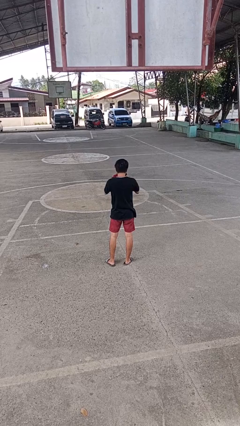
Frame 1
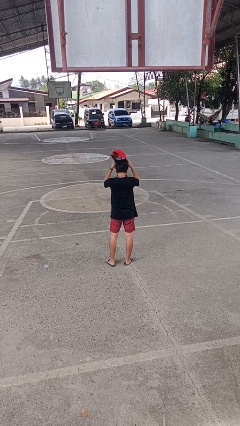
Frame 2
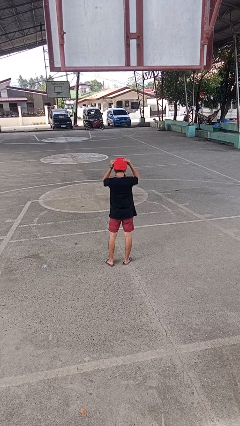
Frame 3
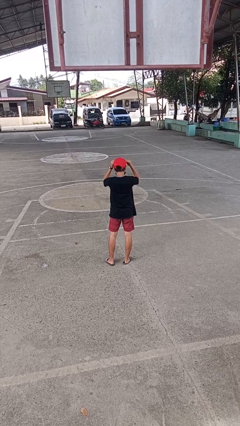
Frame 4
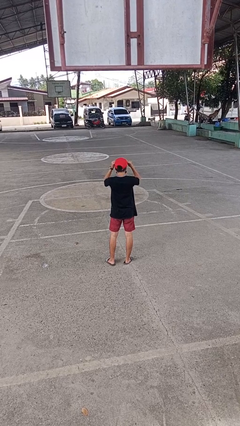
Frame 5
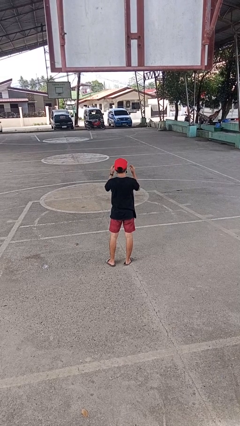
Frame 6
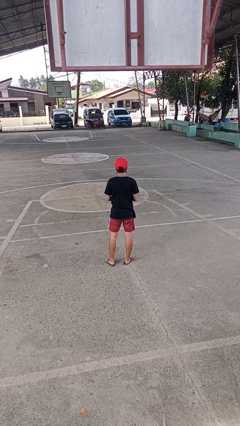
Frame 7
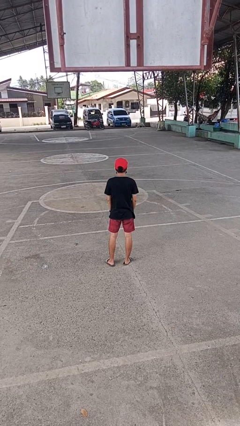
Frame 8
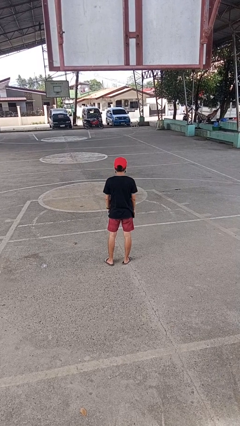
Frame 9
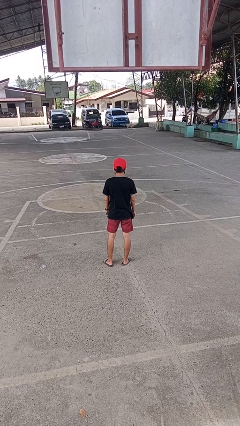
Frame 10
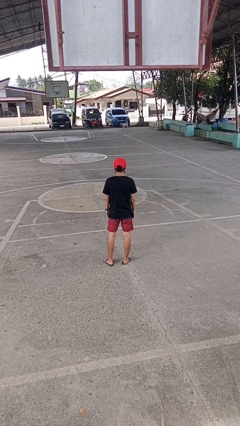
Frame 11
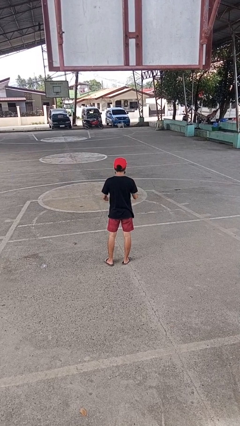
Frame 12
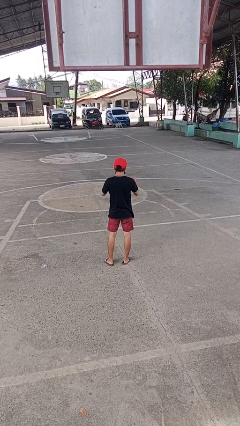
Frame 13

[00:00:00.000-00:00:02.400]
person puts on hat

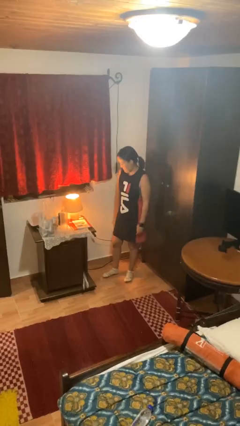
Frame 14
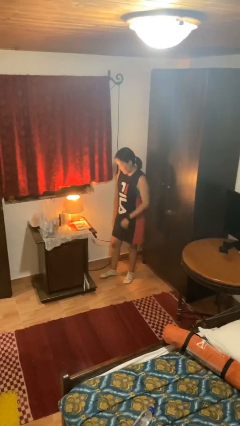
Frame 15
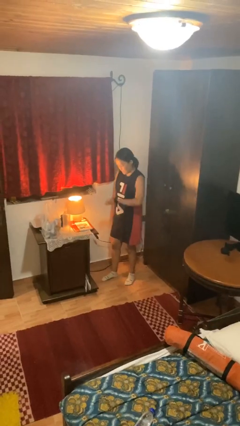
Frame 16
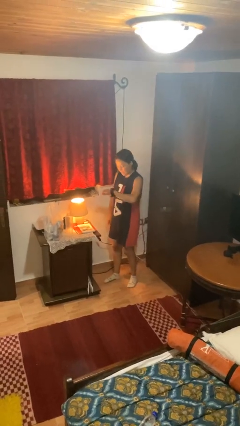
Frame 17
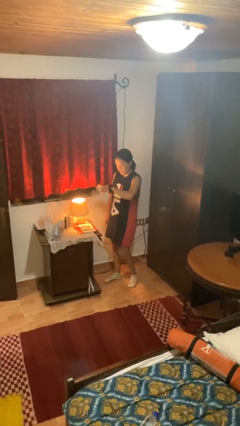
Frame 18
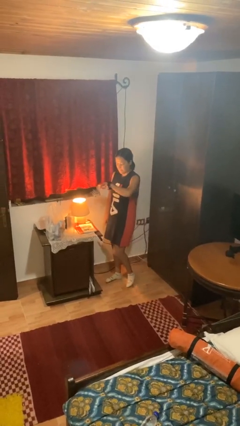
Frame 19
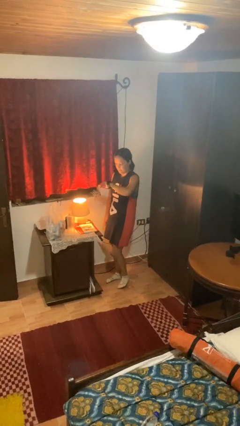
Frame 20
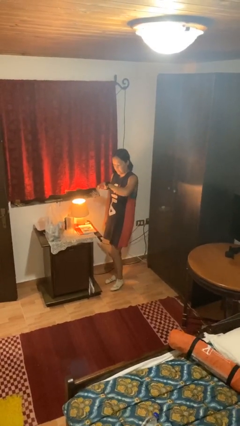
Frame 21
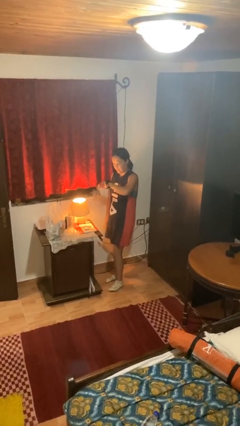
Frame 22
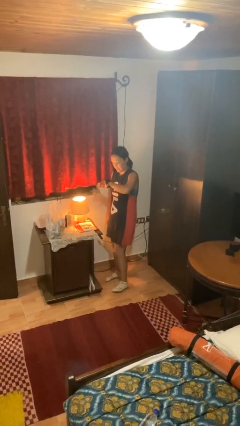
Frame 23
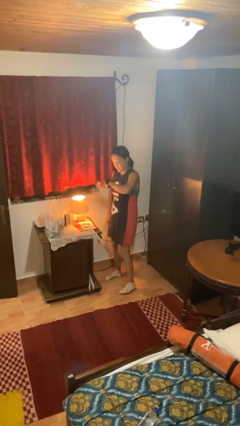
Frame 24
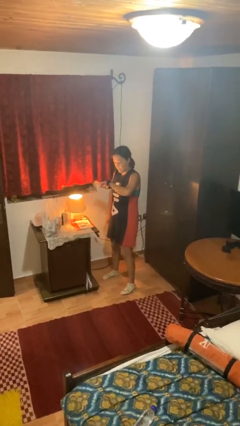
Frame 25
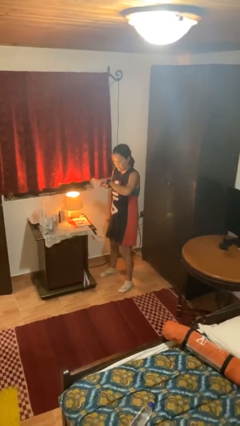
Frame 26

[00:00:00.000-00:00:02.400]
person looks at wristwatch

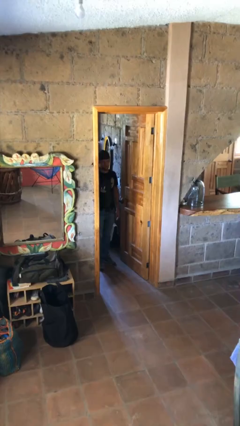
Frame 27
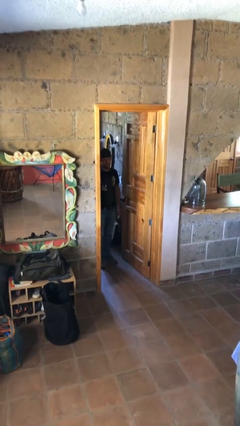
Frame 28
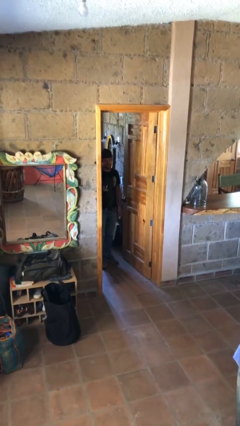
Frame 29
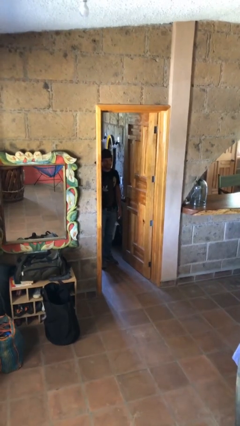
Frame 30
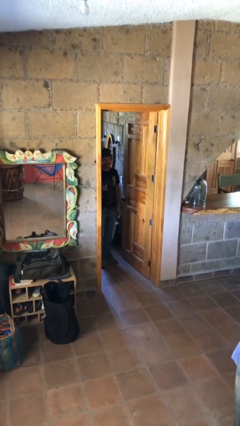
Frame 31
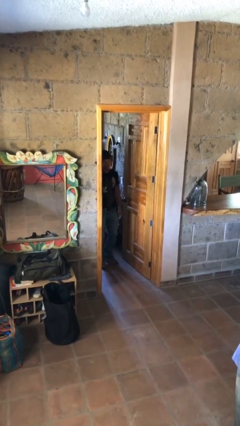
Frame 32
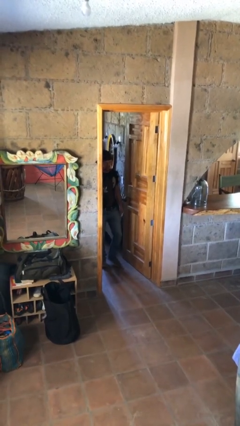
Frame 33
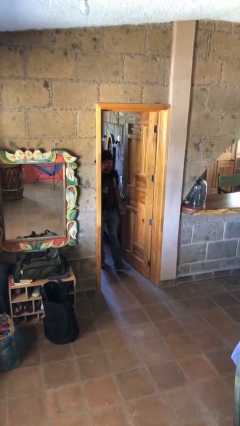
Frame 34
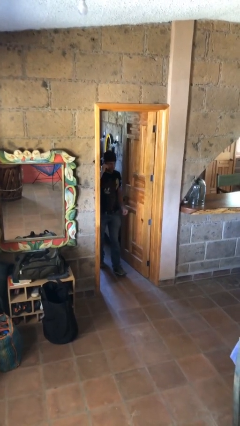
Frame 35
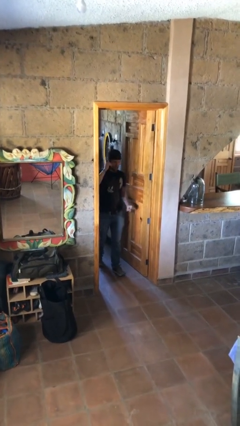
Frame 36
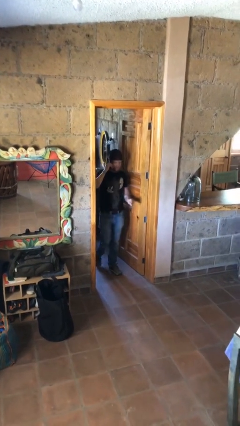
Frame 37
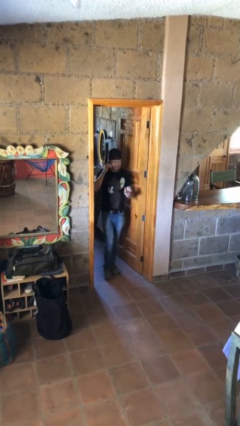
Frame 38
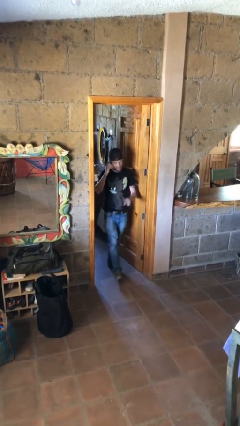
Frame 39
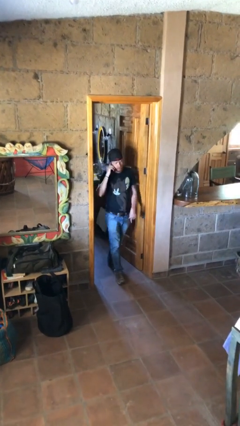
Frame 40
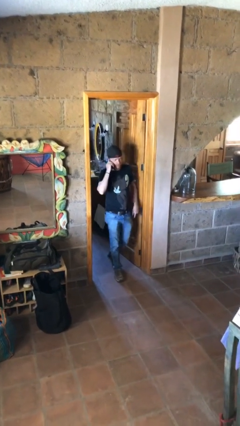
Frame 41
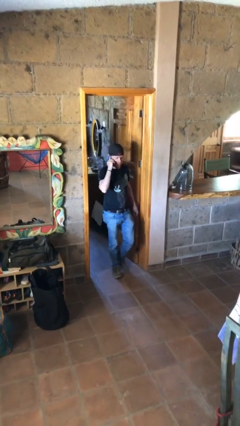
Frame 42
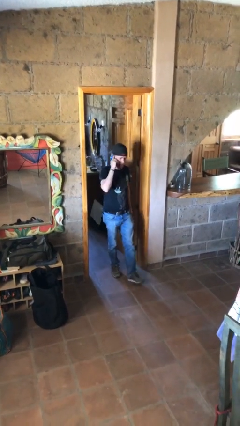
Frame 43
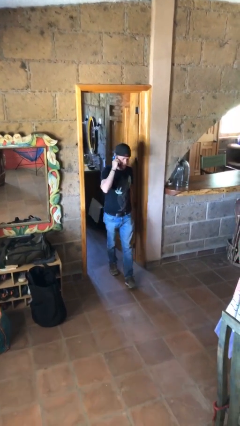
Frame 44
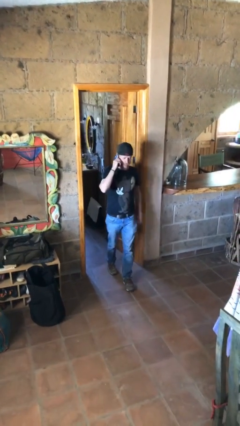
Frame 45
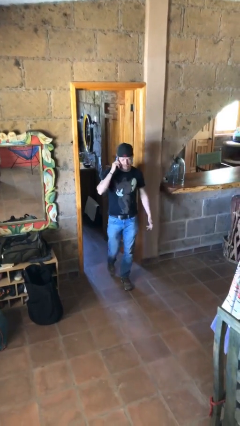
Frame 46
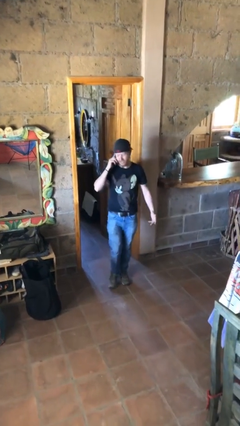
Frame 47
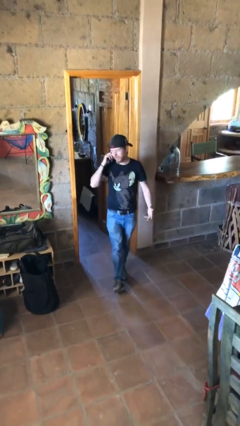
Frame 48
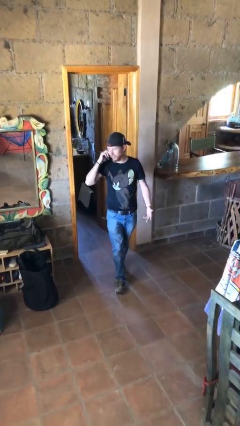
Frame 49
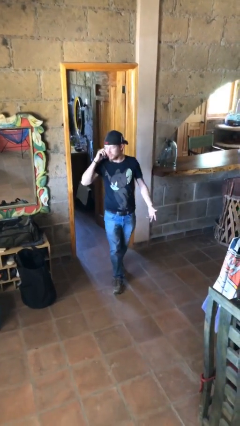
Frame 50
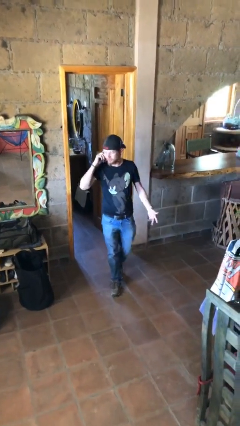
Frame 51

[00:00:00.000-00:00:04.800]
person enters scene through structure

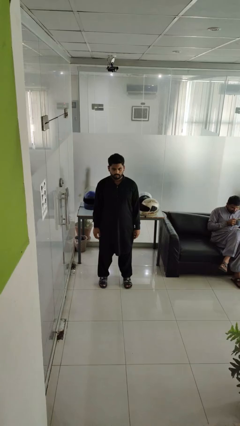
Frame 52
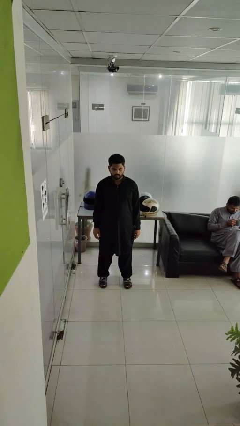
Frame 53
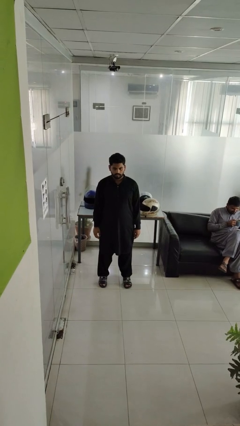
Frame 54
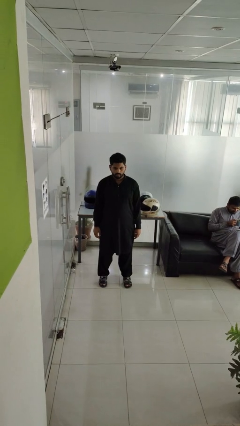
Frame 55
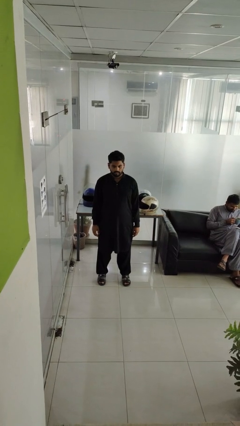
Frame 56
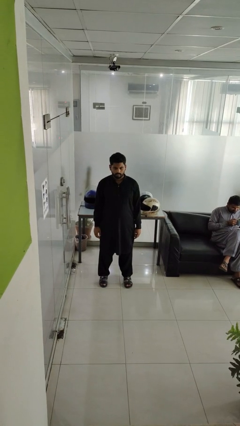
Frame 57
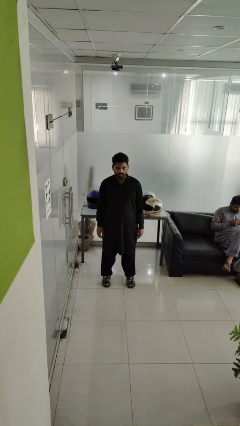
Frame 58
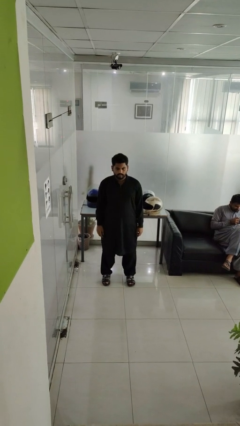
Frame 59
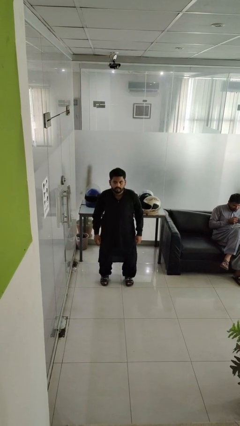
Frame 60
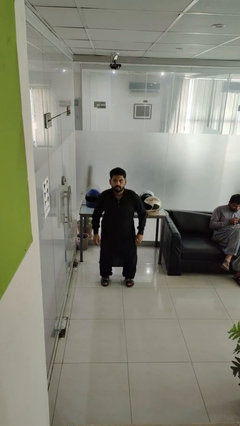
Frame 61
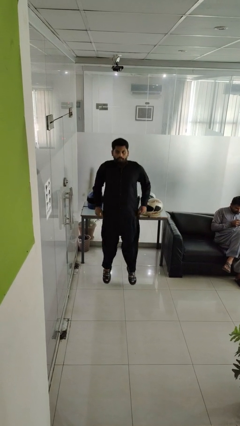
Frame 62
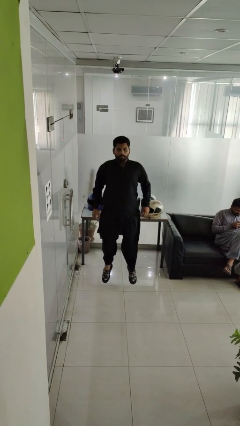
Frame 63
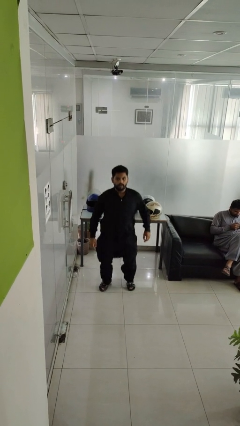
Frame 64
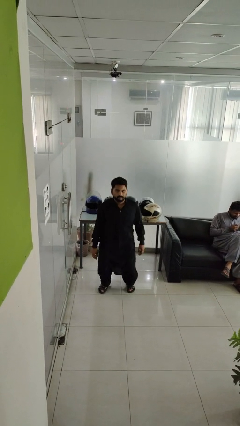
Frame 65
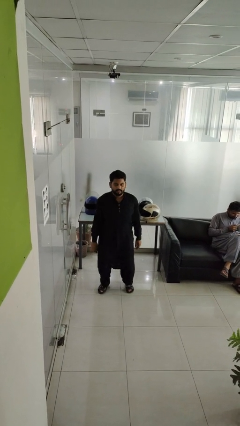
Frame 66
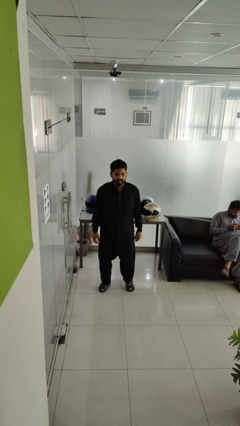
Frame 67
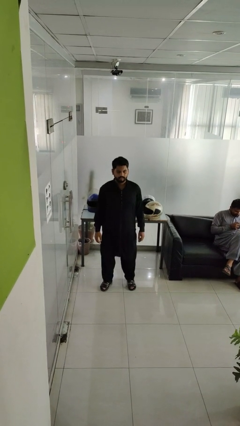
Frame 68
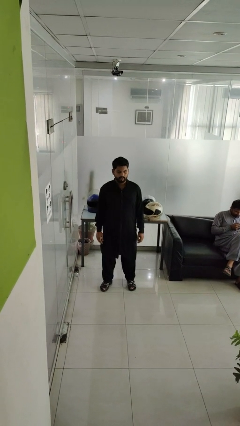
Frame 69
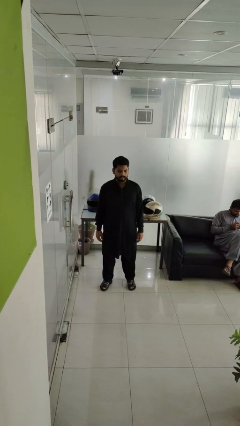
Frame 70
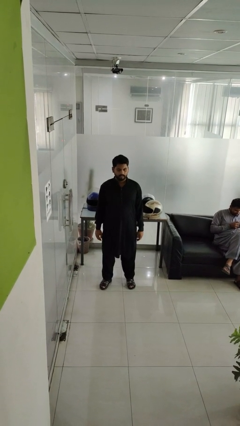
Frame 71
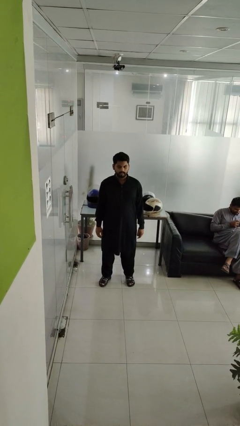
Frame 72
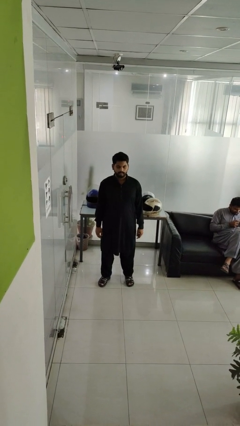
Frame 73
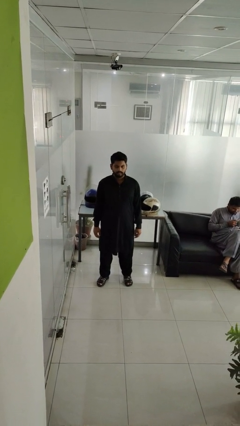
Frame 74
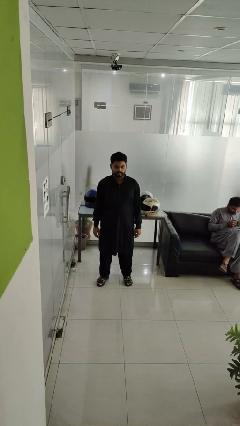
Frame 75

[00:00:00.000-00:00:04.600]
person jumps

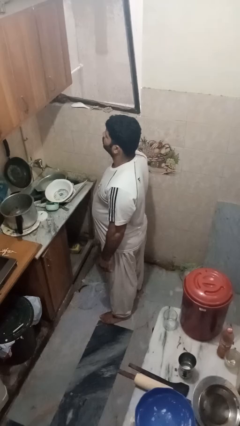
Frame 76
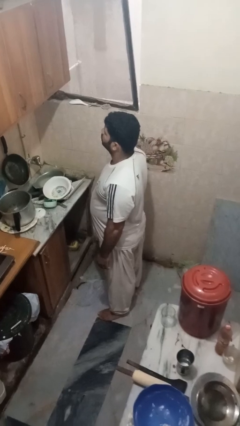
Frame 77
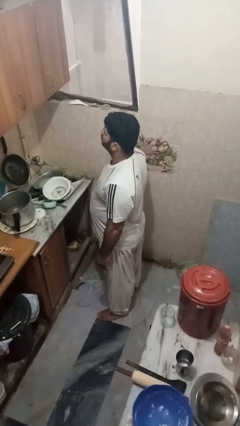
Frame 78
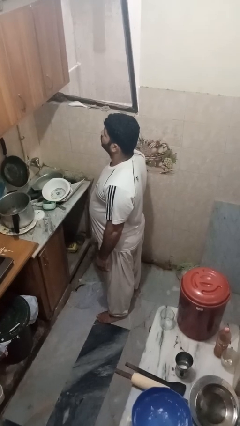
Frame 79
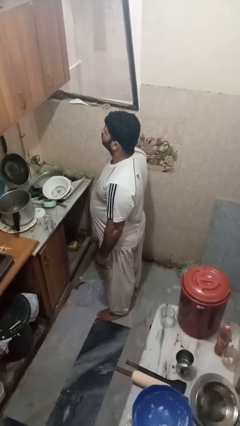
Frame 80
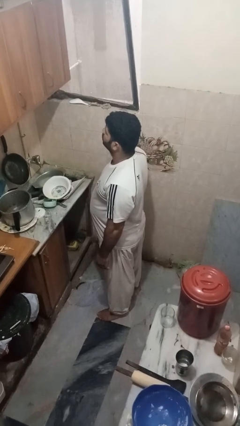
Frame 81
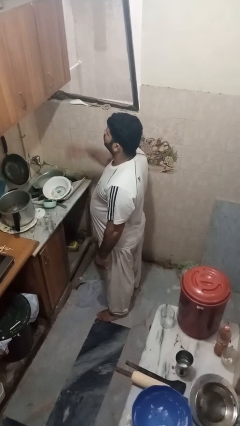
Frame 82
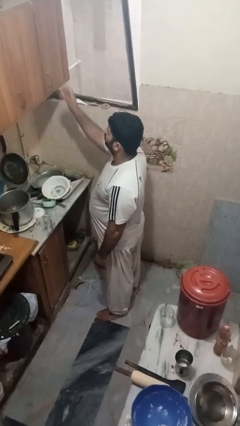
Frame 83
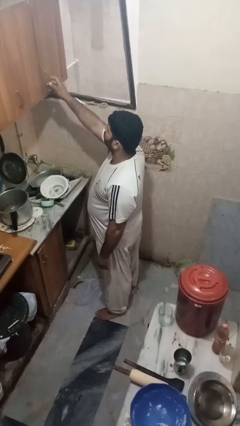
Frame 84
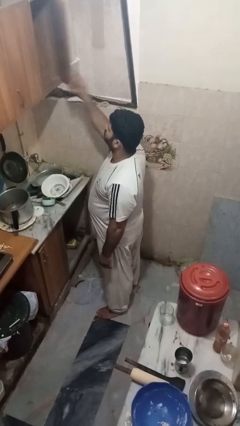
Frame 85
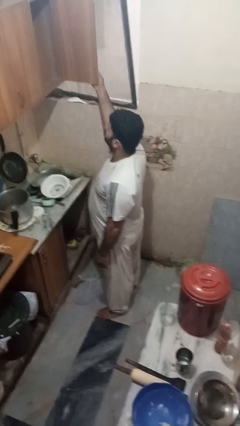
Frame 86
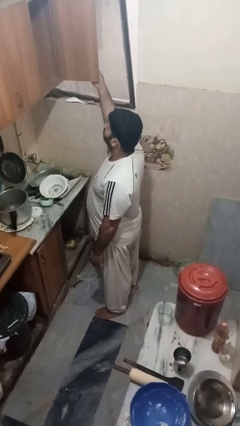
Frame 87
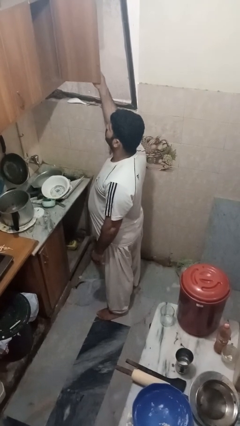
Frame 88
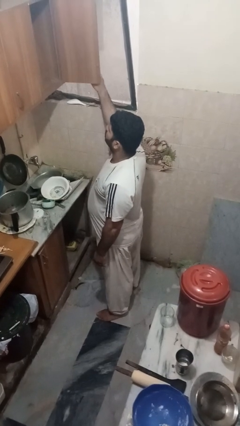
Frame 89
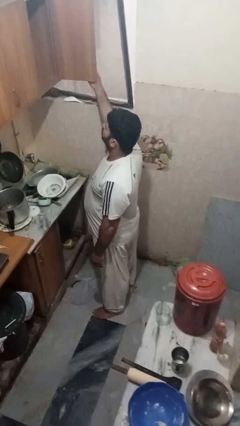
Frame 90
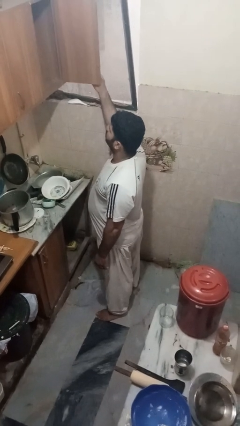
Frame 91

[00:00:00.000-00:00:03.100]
person opens cabinet

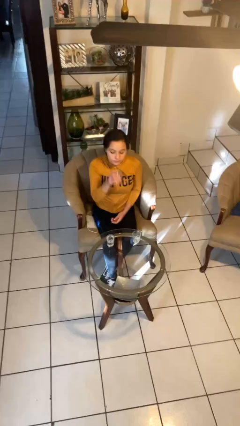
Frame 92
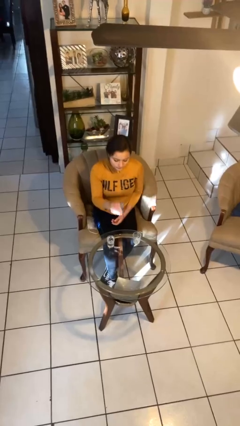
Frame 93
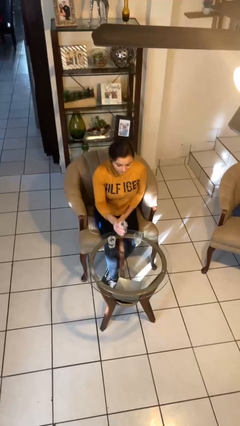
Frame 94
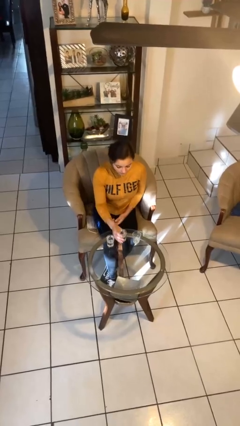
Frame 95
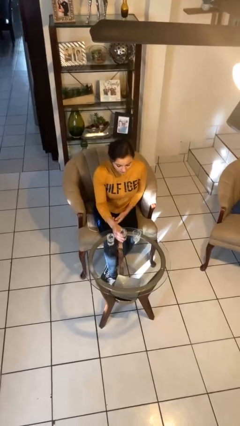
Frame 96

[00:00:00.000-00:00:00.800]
person puts down object on table
